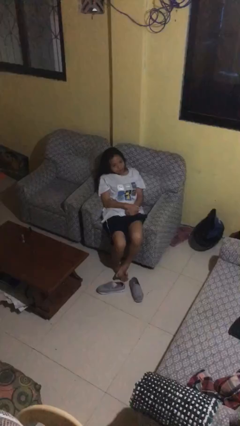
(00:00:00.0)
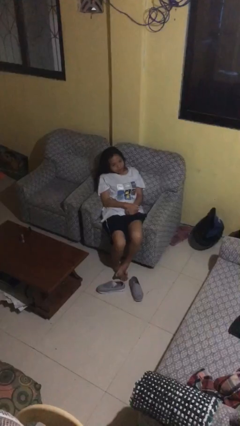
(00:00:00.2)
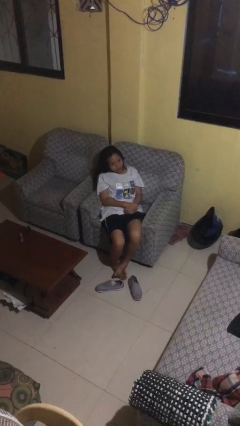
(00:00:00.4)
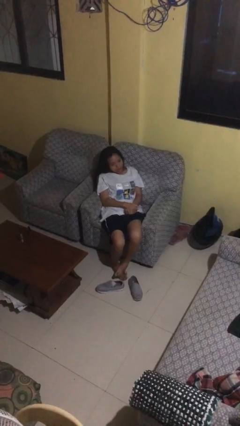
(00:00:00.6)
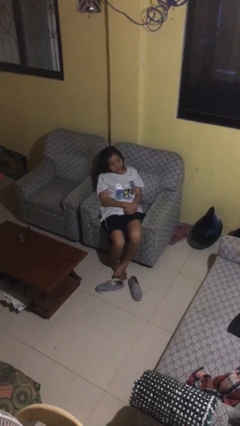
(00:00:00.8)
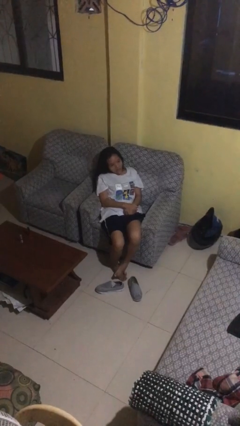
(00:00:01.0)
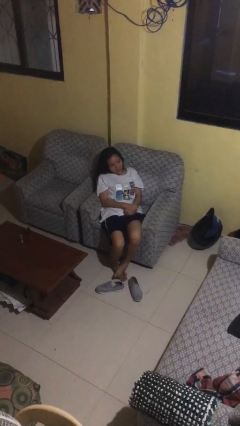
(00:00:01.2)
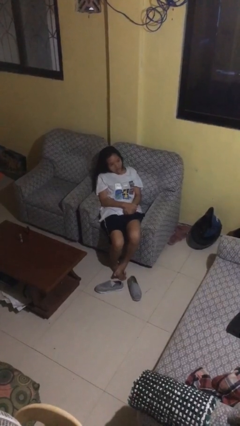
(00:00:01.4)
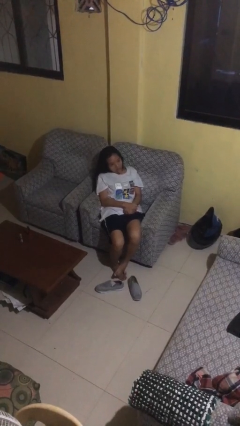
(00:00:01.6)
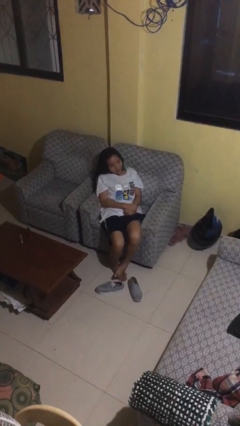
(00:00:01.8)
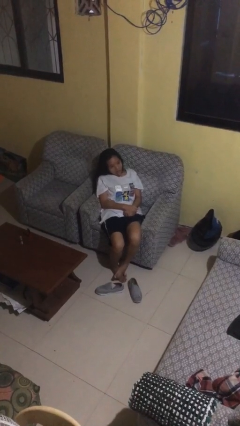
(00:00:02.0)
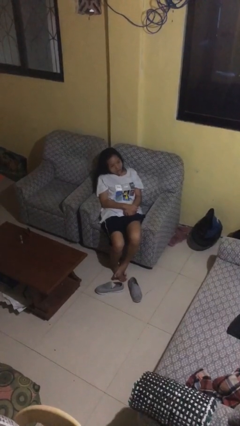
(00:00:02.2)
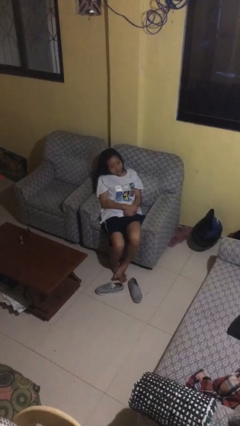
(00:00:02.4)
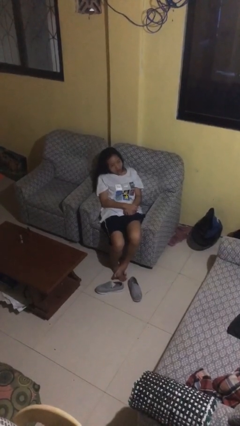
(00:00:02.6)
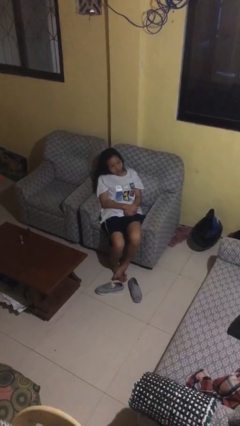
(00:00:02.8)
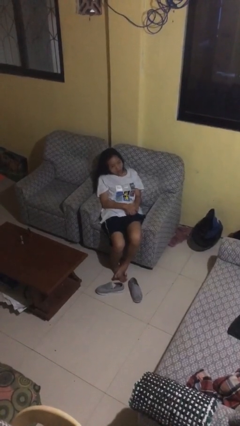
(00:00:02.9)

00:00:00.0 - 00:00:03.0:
person sticks out tongue

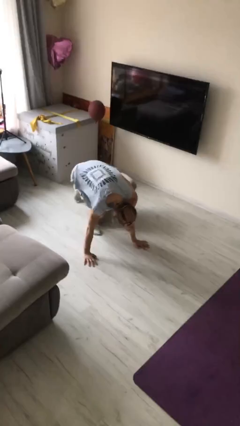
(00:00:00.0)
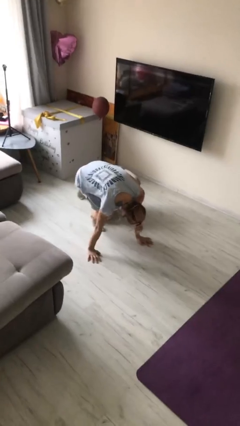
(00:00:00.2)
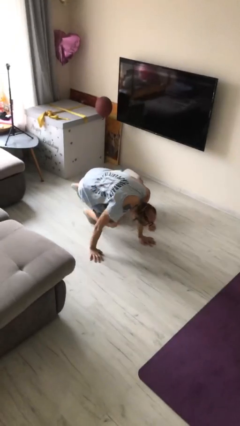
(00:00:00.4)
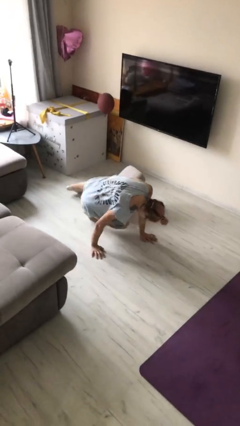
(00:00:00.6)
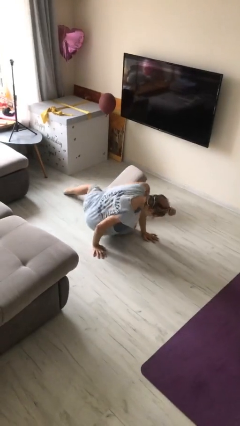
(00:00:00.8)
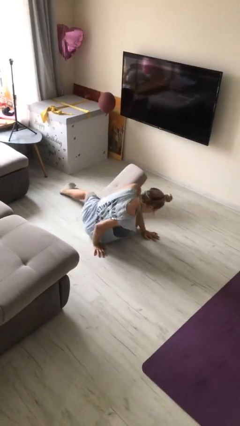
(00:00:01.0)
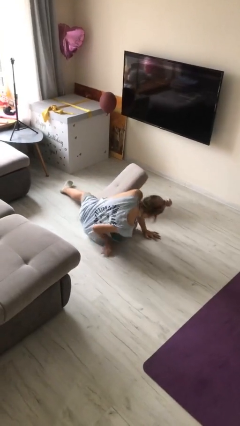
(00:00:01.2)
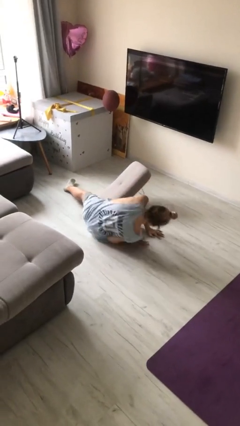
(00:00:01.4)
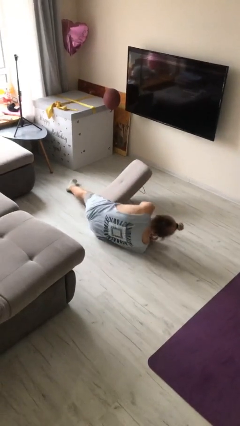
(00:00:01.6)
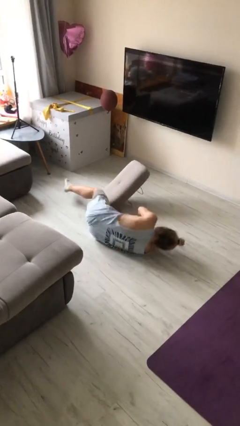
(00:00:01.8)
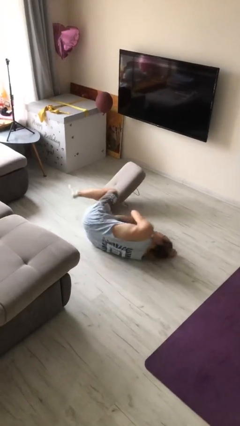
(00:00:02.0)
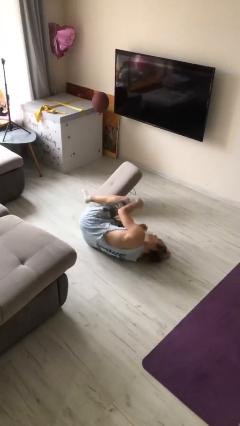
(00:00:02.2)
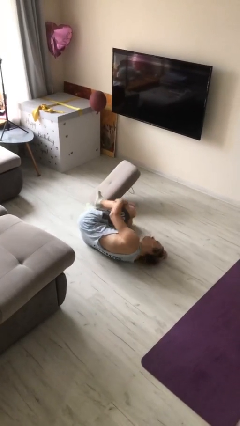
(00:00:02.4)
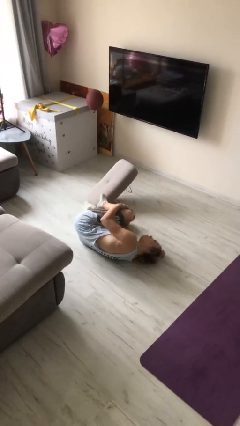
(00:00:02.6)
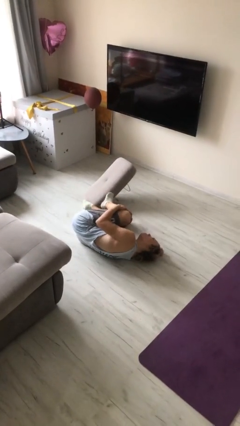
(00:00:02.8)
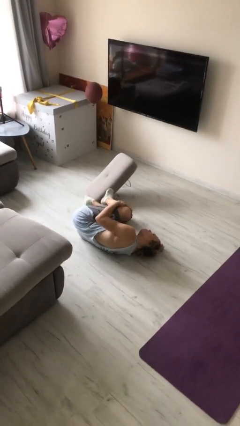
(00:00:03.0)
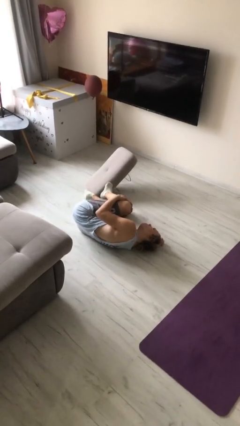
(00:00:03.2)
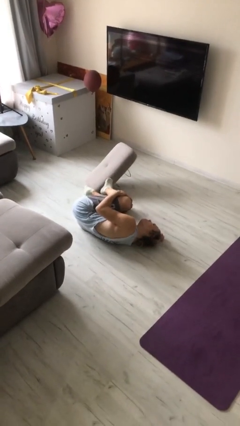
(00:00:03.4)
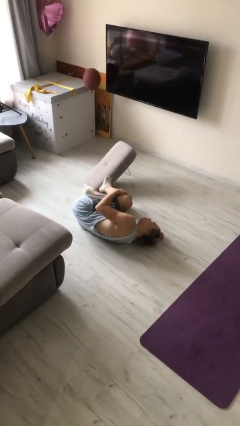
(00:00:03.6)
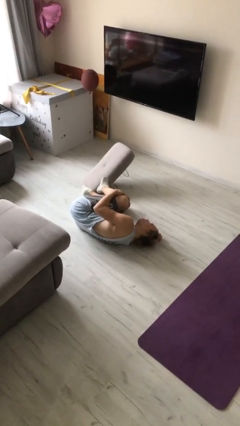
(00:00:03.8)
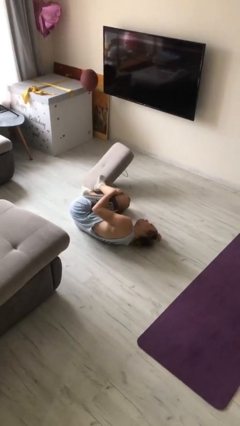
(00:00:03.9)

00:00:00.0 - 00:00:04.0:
person lies down on floor

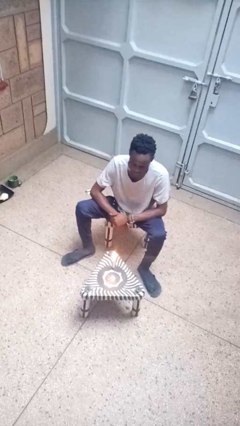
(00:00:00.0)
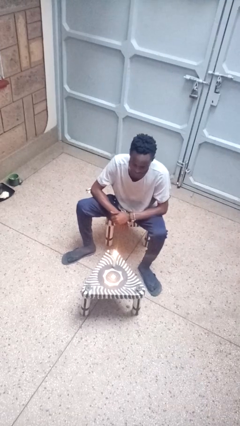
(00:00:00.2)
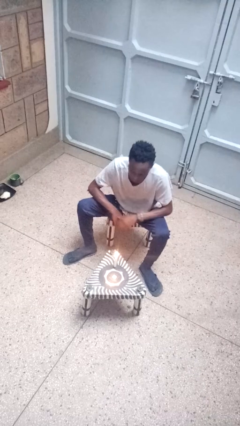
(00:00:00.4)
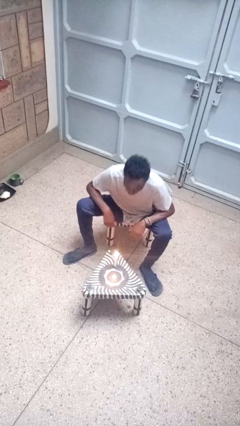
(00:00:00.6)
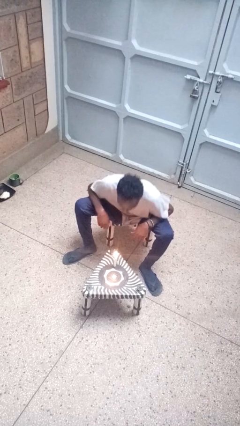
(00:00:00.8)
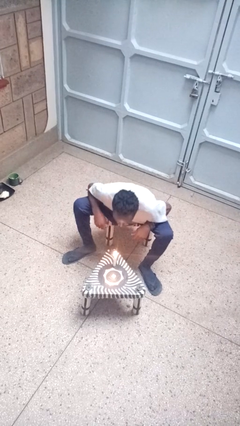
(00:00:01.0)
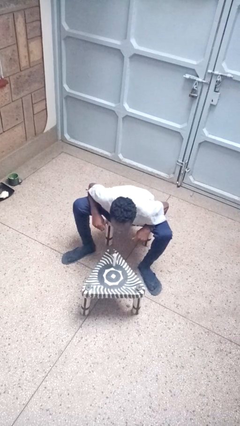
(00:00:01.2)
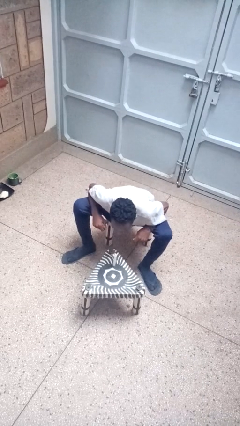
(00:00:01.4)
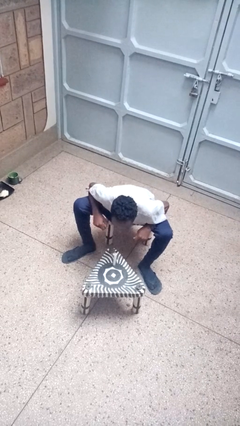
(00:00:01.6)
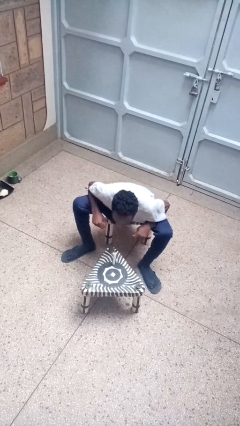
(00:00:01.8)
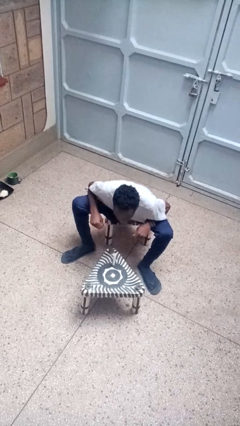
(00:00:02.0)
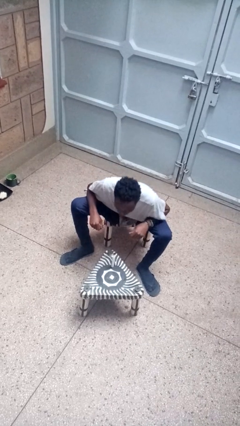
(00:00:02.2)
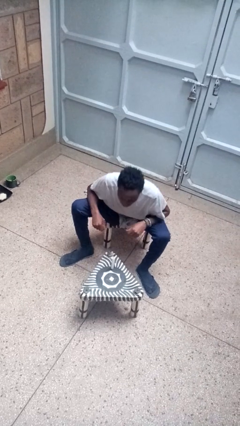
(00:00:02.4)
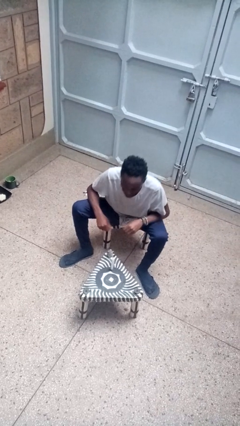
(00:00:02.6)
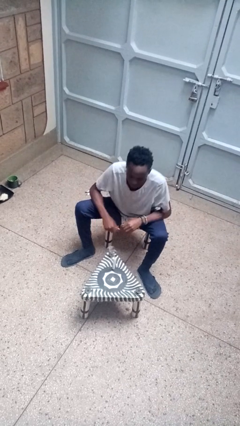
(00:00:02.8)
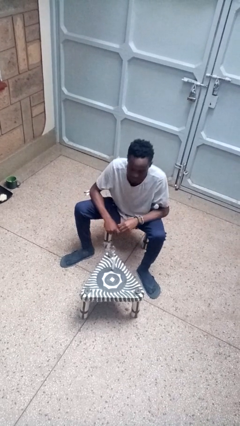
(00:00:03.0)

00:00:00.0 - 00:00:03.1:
person extinguishes candle

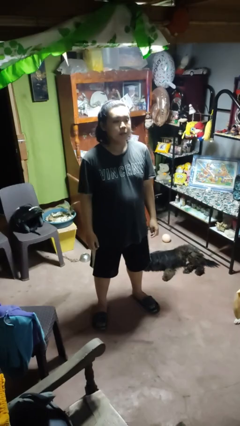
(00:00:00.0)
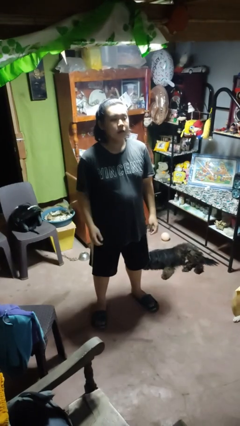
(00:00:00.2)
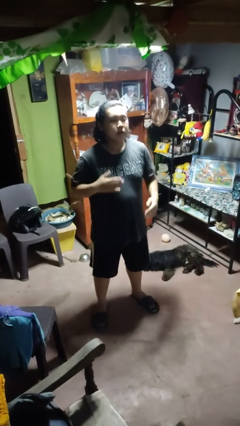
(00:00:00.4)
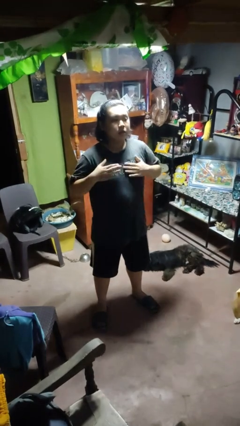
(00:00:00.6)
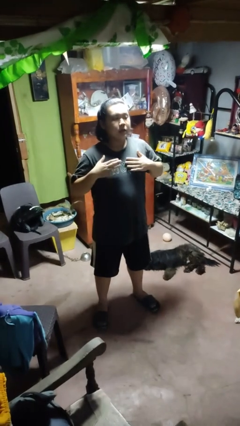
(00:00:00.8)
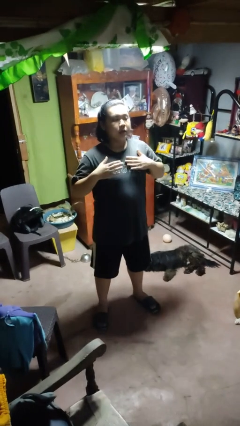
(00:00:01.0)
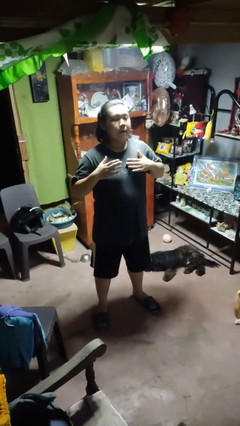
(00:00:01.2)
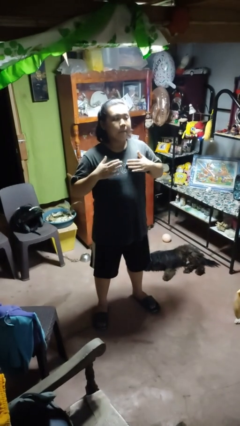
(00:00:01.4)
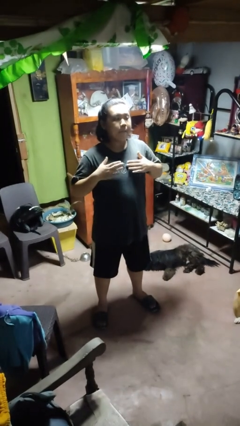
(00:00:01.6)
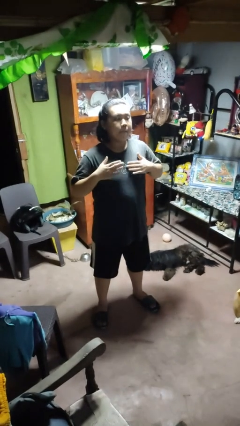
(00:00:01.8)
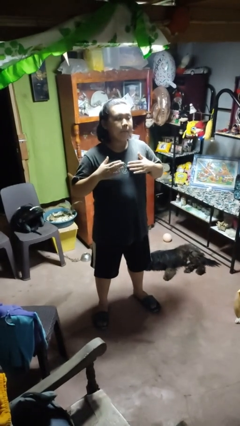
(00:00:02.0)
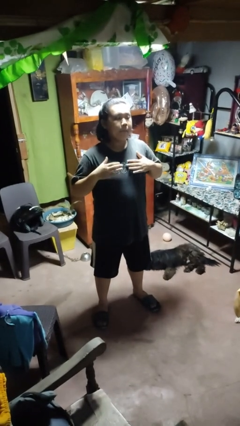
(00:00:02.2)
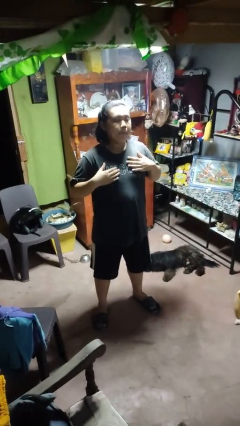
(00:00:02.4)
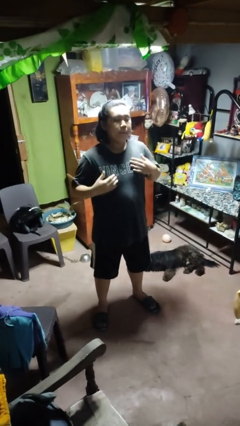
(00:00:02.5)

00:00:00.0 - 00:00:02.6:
person drums on chest

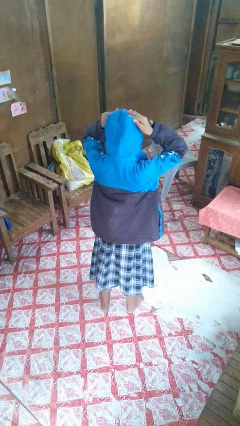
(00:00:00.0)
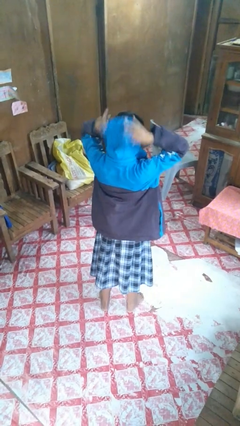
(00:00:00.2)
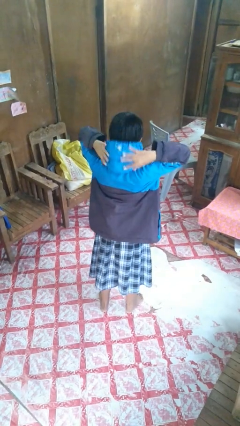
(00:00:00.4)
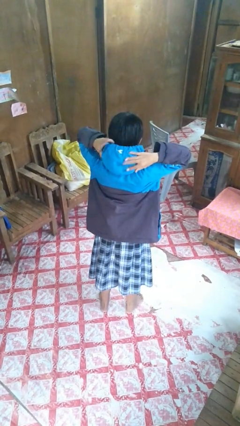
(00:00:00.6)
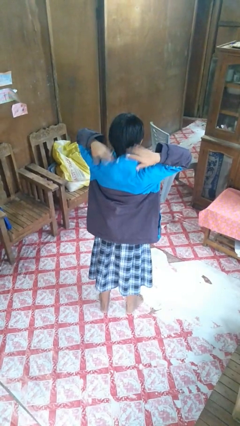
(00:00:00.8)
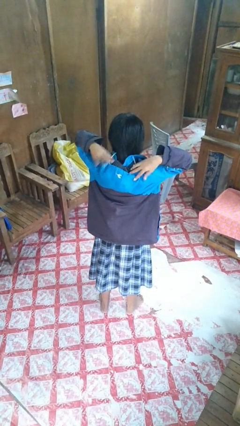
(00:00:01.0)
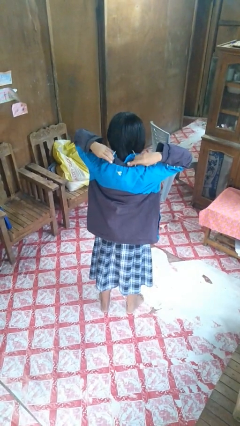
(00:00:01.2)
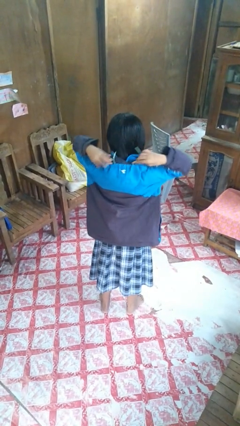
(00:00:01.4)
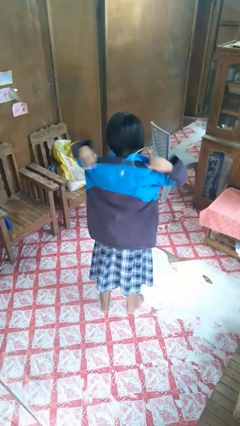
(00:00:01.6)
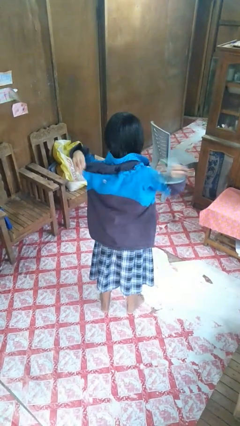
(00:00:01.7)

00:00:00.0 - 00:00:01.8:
person takes off hoodie

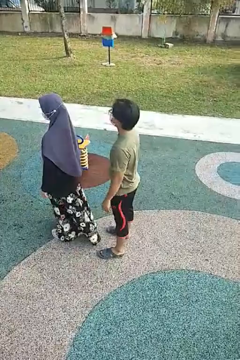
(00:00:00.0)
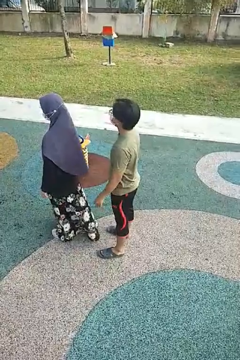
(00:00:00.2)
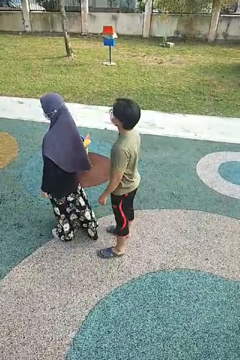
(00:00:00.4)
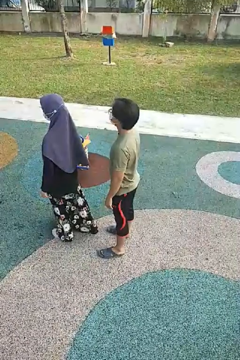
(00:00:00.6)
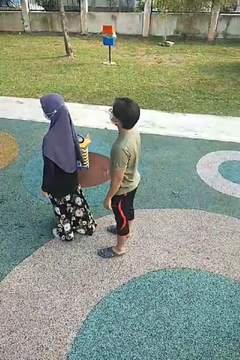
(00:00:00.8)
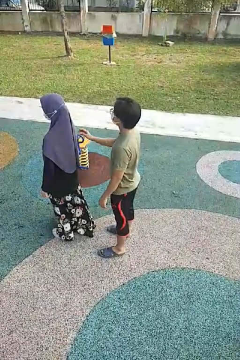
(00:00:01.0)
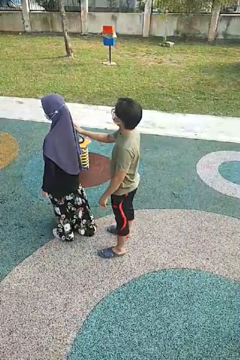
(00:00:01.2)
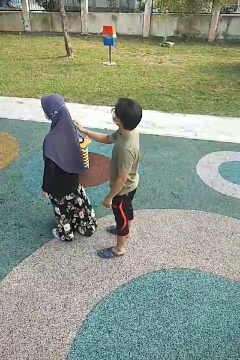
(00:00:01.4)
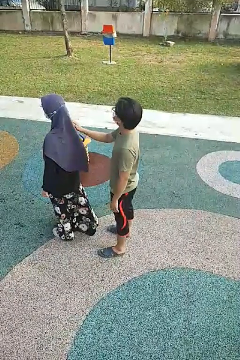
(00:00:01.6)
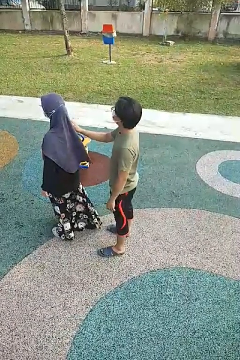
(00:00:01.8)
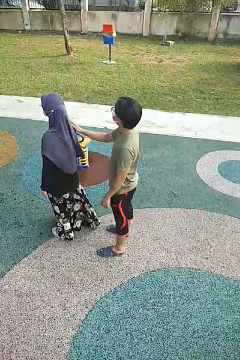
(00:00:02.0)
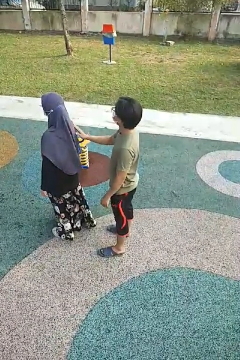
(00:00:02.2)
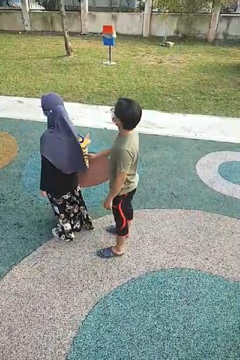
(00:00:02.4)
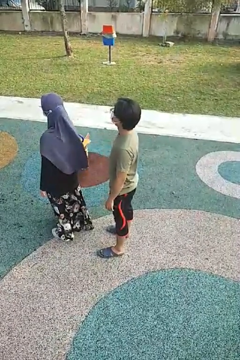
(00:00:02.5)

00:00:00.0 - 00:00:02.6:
person touches back of person

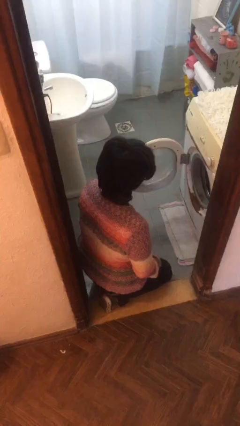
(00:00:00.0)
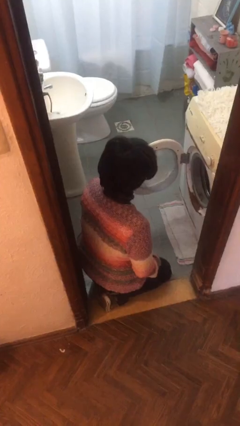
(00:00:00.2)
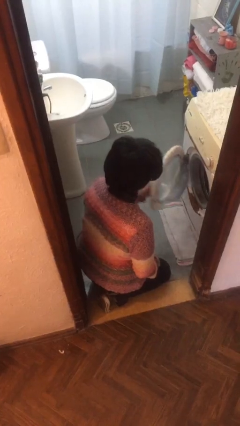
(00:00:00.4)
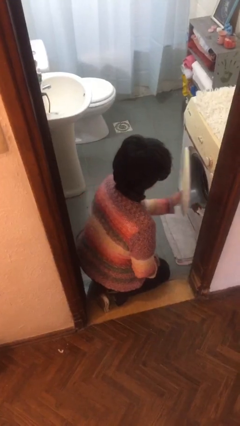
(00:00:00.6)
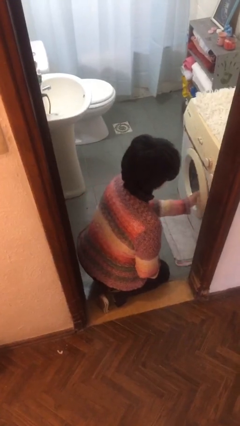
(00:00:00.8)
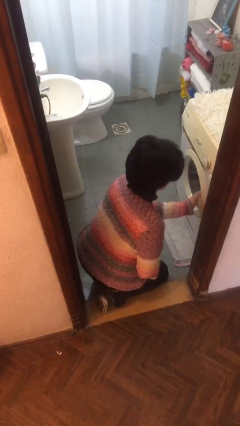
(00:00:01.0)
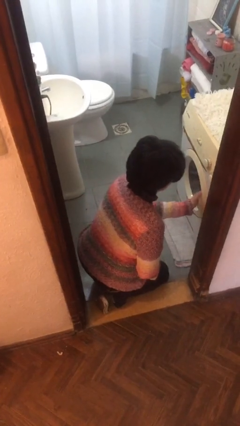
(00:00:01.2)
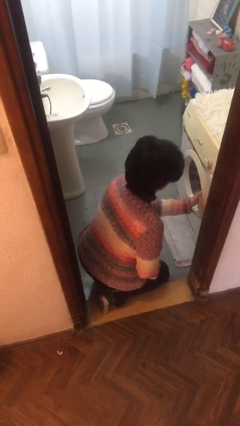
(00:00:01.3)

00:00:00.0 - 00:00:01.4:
person closes clothes washer
